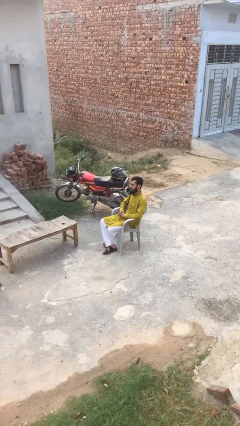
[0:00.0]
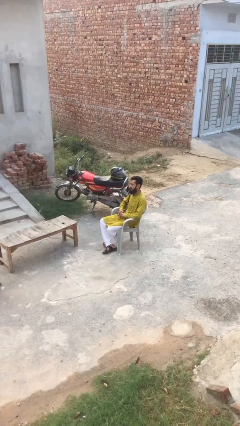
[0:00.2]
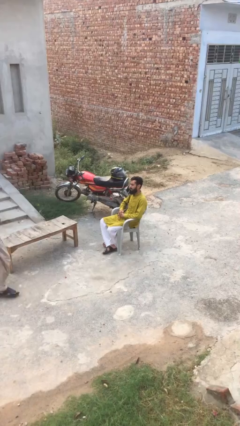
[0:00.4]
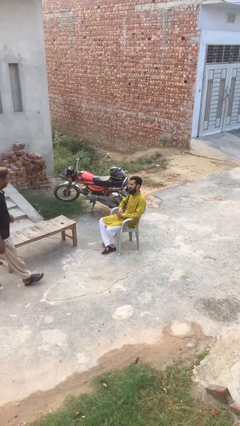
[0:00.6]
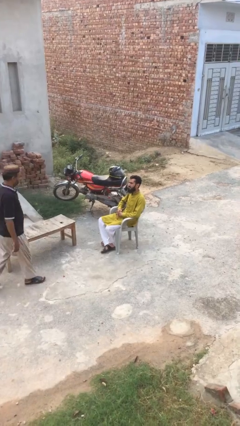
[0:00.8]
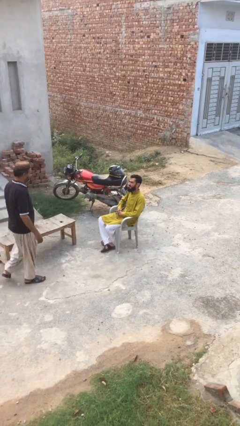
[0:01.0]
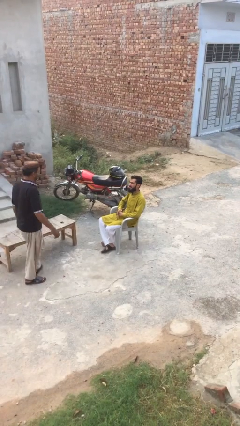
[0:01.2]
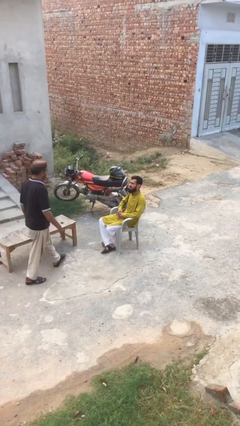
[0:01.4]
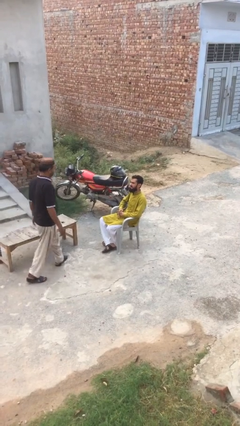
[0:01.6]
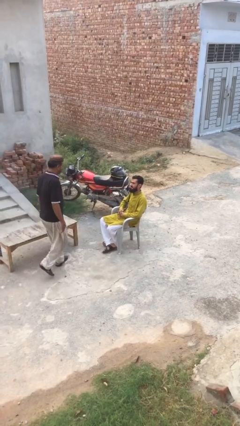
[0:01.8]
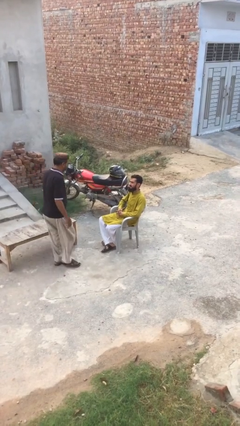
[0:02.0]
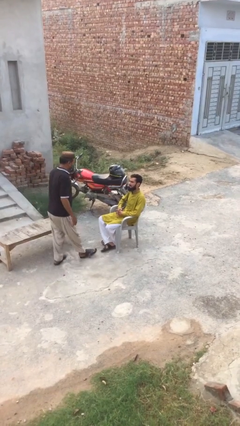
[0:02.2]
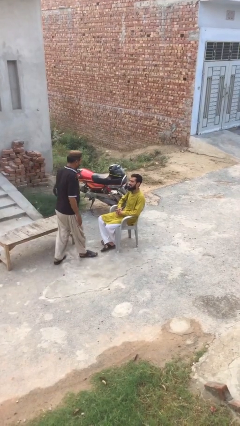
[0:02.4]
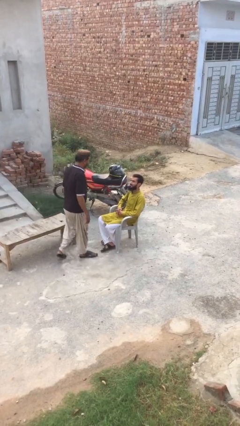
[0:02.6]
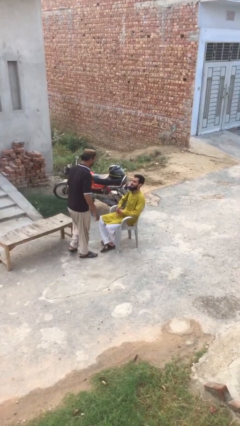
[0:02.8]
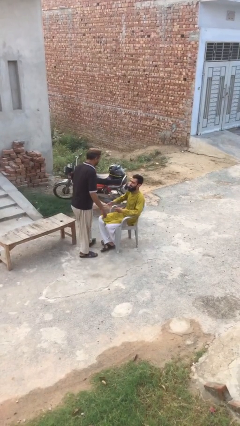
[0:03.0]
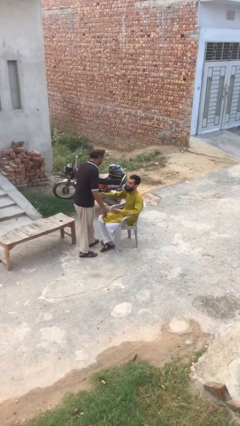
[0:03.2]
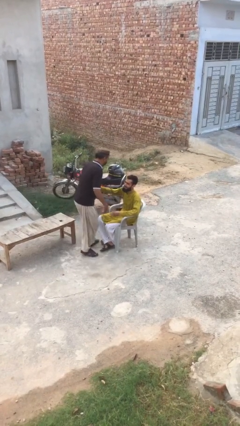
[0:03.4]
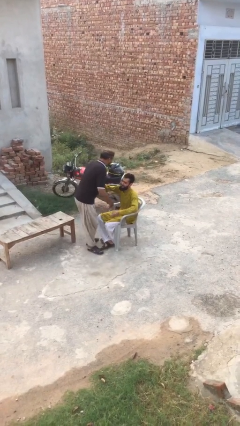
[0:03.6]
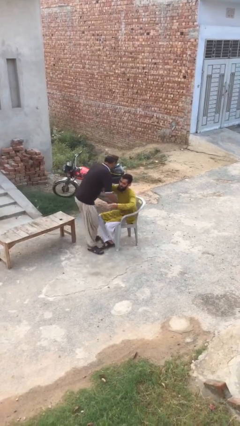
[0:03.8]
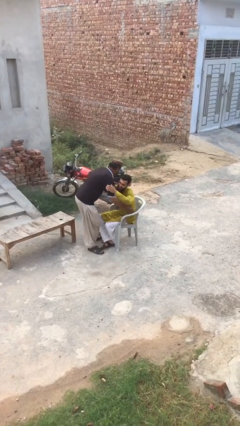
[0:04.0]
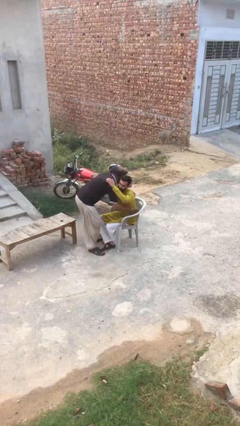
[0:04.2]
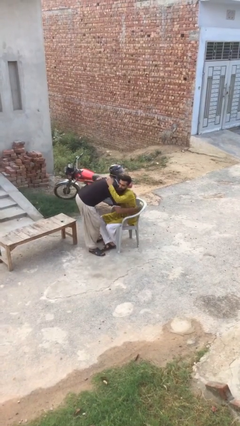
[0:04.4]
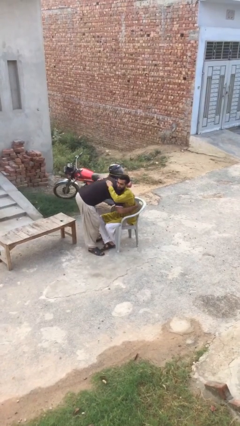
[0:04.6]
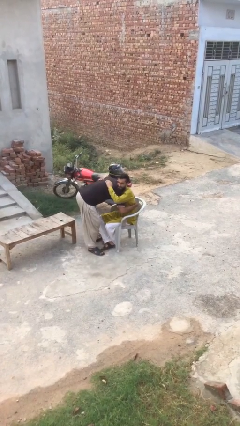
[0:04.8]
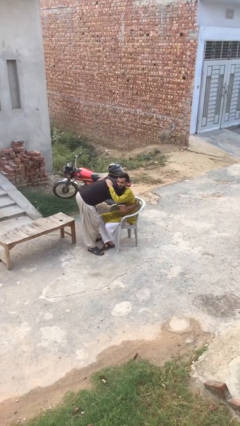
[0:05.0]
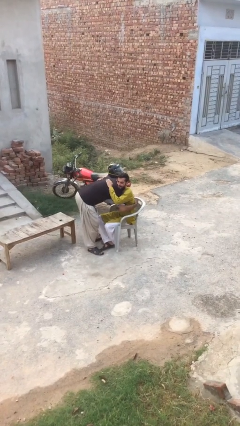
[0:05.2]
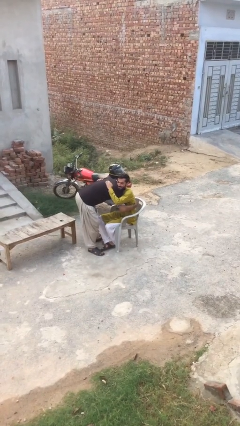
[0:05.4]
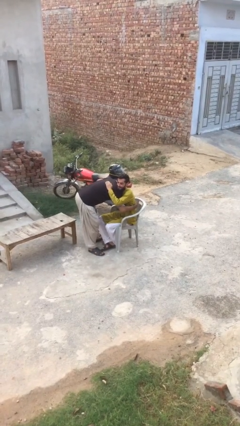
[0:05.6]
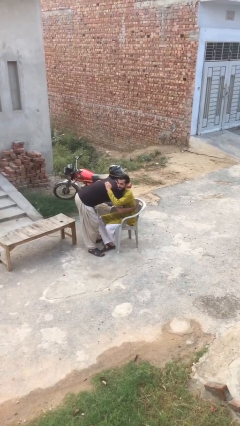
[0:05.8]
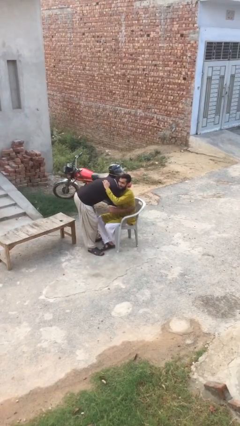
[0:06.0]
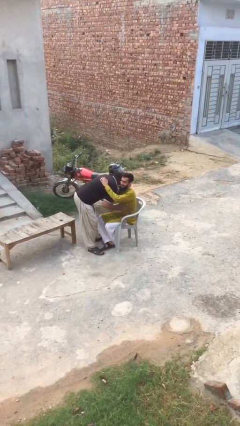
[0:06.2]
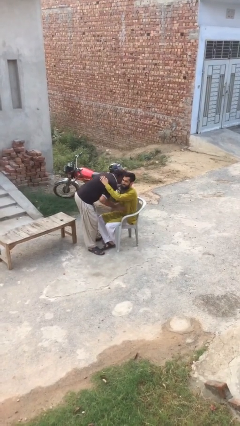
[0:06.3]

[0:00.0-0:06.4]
person embraces person

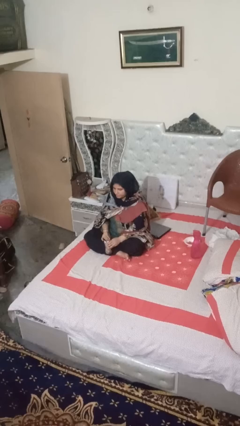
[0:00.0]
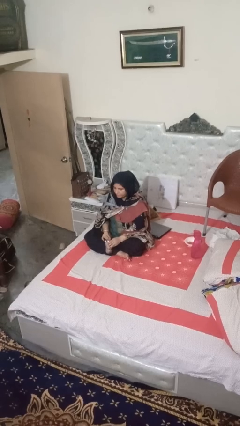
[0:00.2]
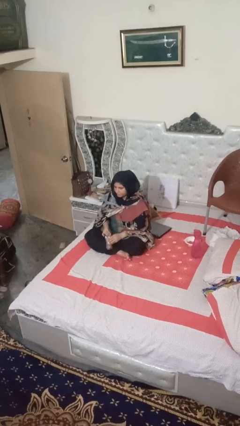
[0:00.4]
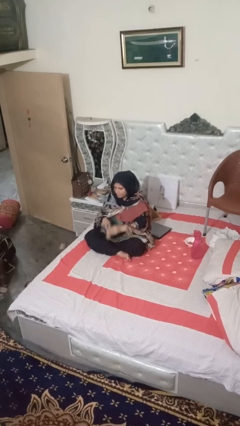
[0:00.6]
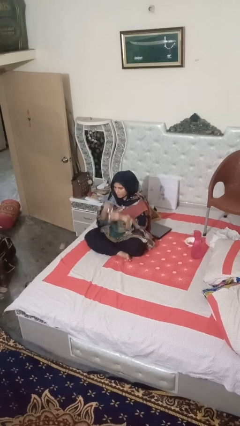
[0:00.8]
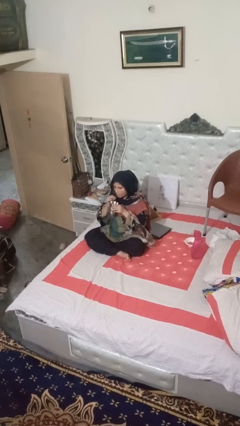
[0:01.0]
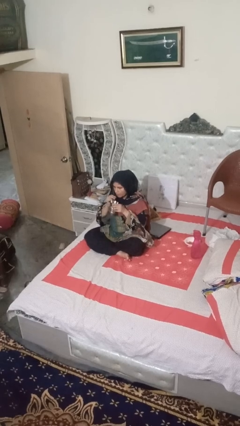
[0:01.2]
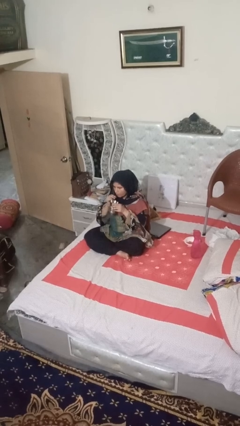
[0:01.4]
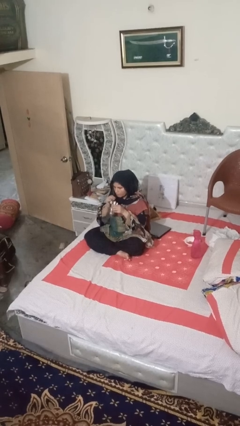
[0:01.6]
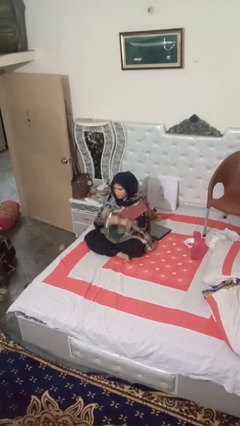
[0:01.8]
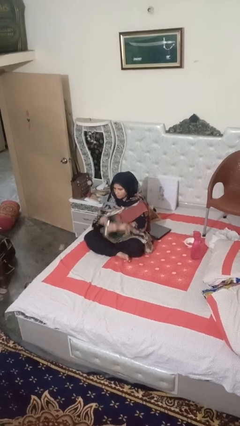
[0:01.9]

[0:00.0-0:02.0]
person drinks from straw

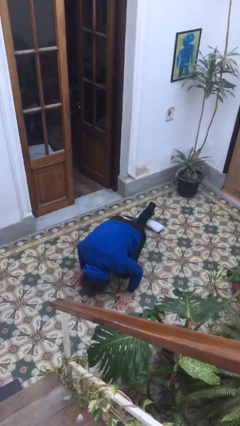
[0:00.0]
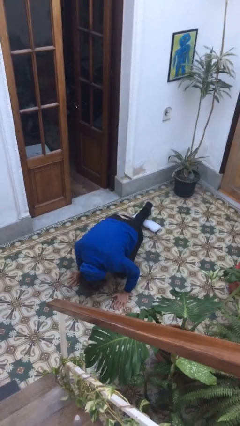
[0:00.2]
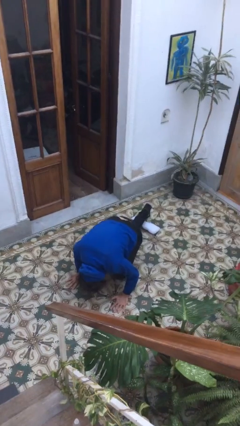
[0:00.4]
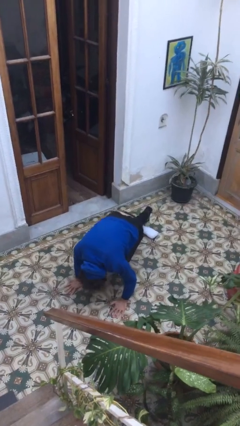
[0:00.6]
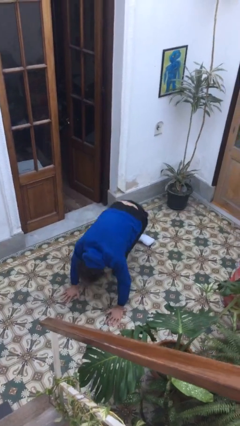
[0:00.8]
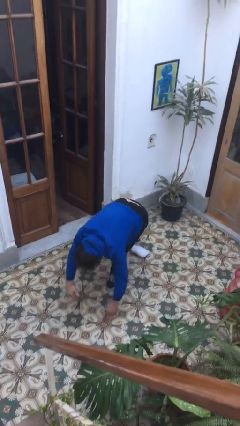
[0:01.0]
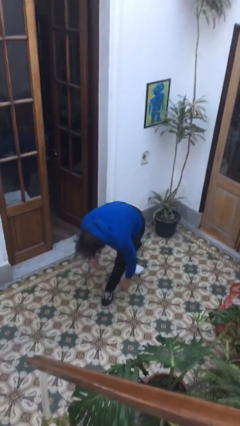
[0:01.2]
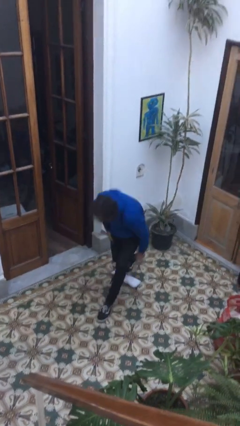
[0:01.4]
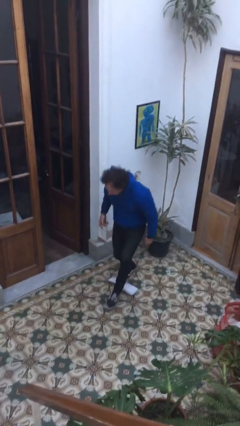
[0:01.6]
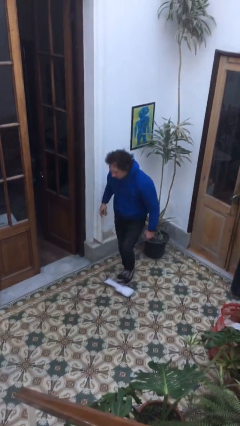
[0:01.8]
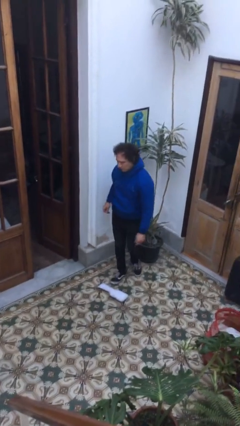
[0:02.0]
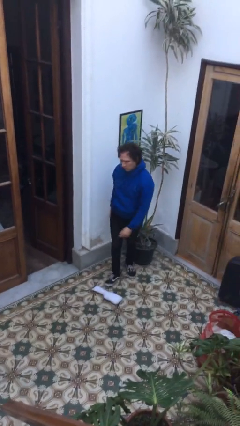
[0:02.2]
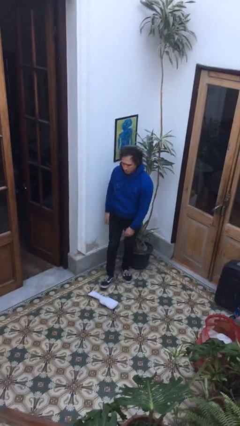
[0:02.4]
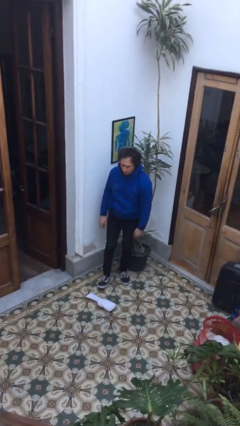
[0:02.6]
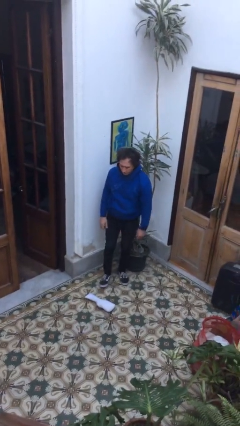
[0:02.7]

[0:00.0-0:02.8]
person stands up from floor

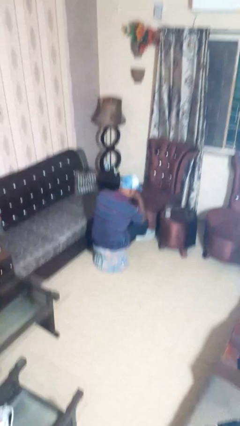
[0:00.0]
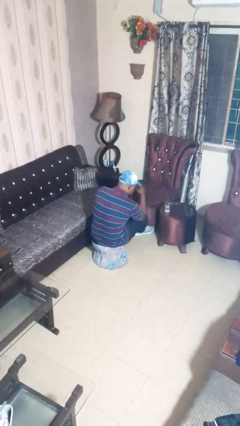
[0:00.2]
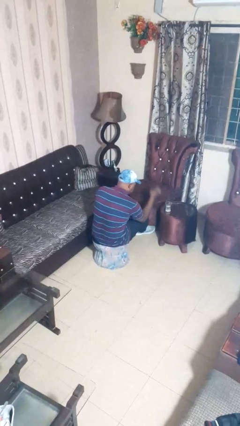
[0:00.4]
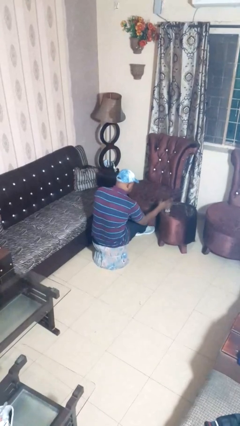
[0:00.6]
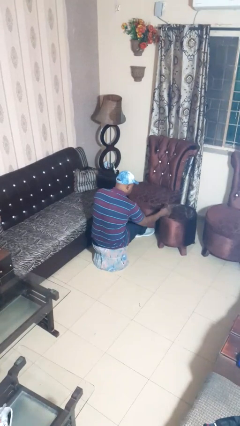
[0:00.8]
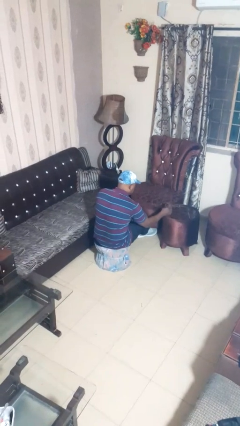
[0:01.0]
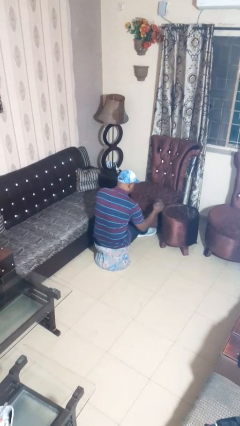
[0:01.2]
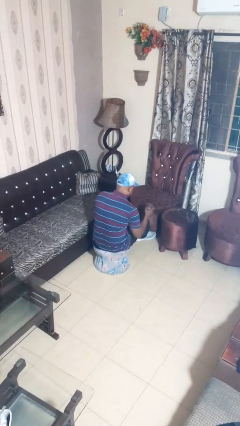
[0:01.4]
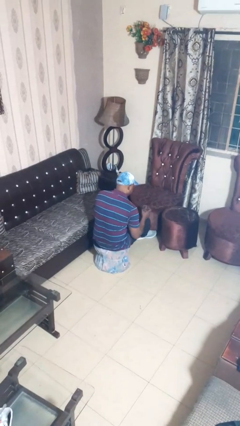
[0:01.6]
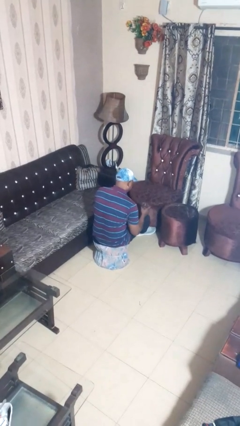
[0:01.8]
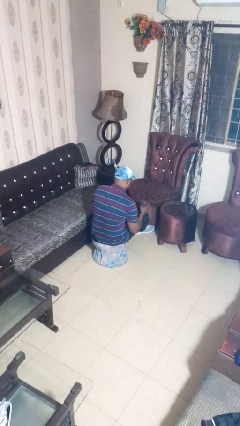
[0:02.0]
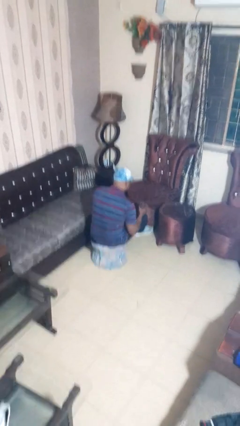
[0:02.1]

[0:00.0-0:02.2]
person picks up object from table

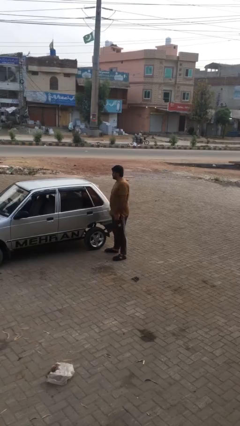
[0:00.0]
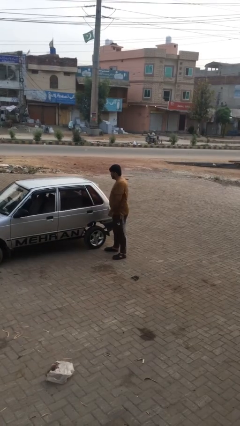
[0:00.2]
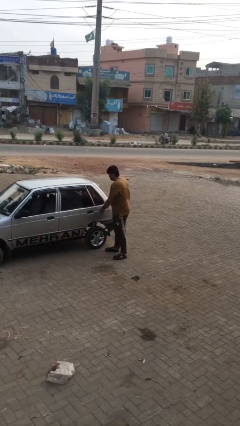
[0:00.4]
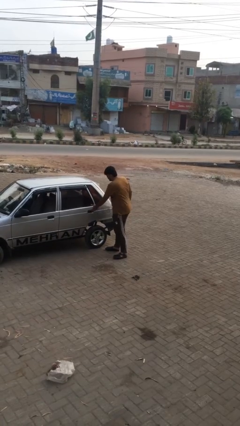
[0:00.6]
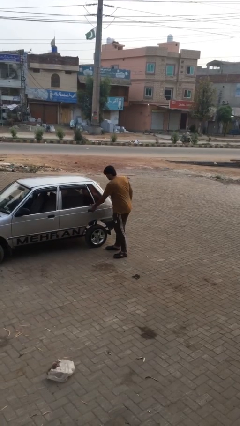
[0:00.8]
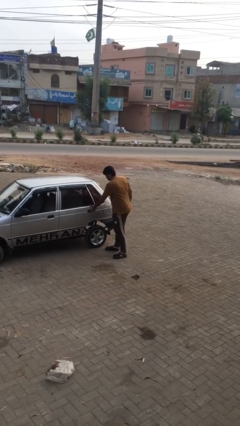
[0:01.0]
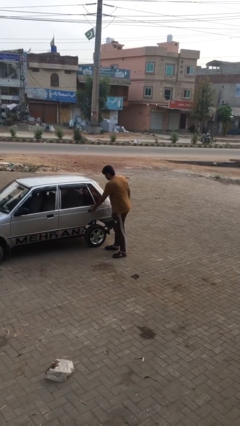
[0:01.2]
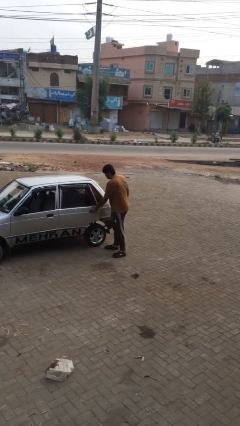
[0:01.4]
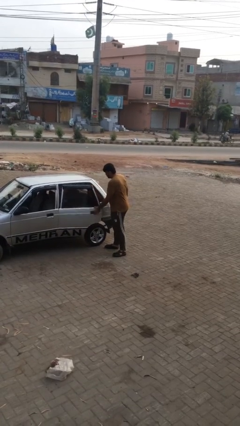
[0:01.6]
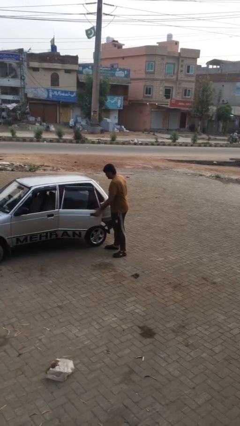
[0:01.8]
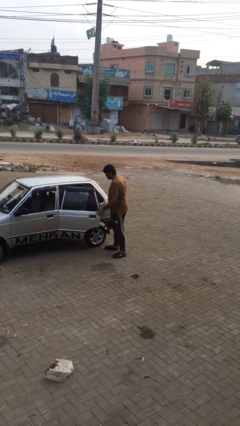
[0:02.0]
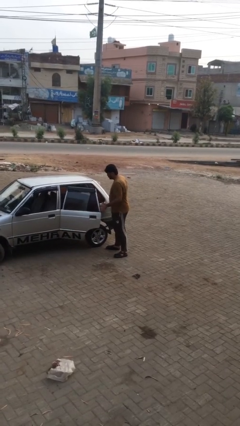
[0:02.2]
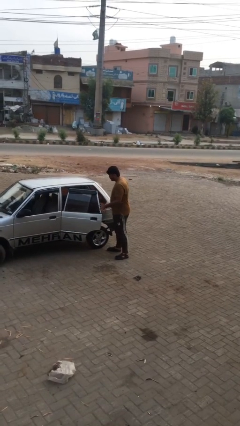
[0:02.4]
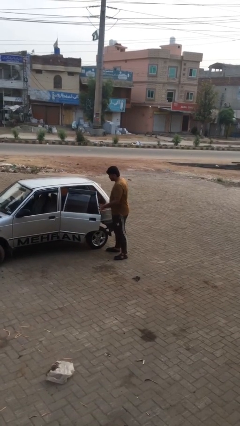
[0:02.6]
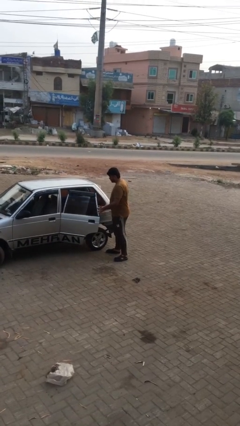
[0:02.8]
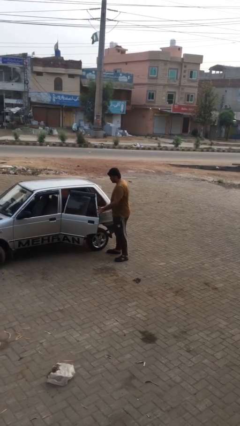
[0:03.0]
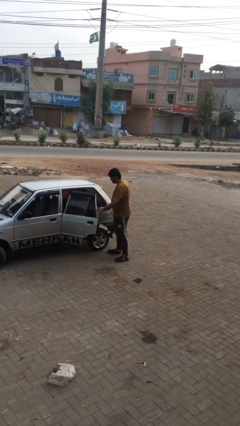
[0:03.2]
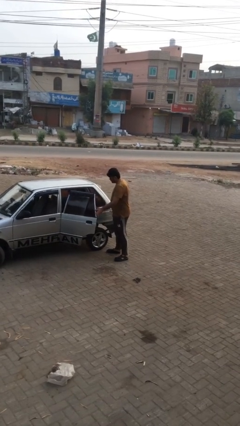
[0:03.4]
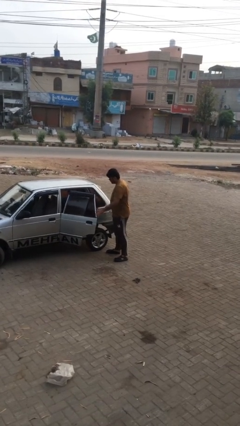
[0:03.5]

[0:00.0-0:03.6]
person opens car door

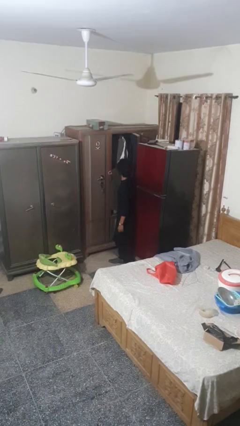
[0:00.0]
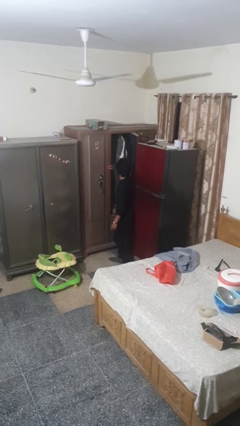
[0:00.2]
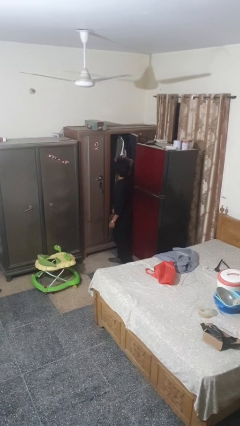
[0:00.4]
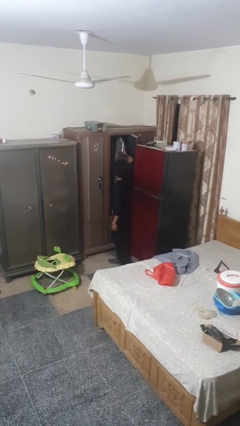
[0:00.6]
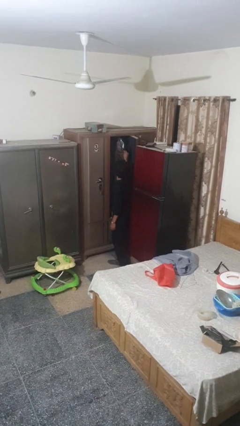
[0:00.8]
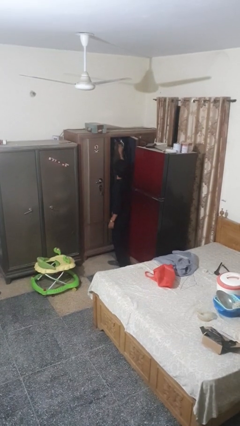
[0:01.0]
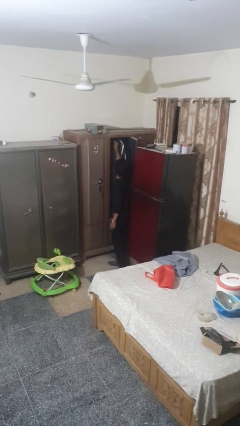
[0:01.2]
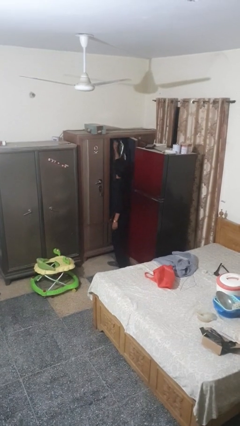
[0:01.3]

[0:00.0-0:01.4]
person puts clothes into closet
